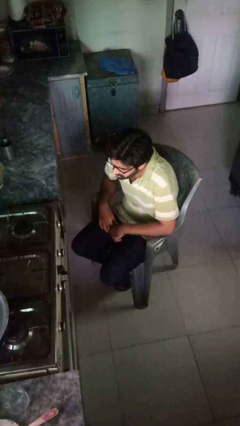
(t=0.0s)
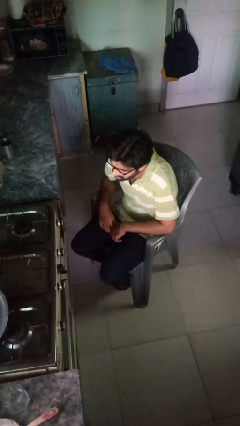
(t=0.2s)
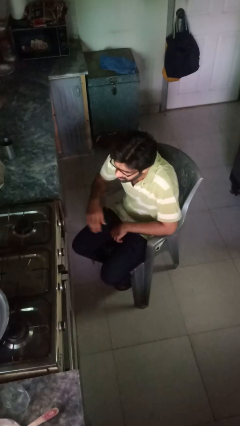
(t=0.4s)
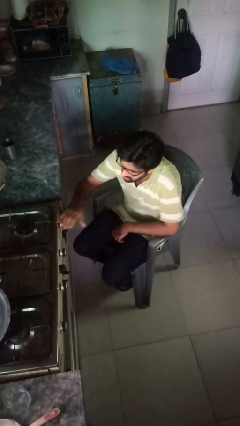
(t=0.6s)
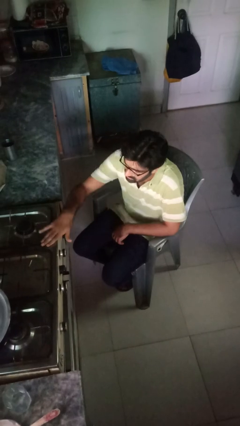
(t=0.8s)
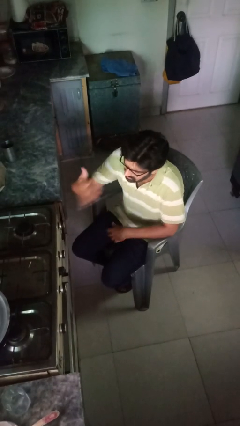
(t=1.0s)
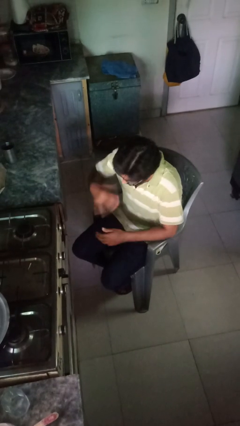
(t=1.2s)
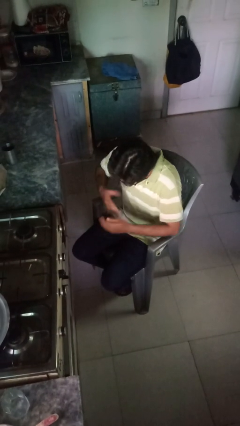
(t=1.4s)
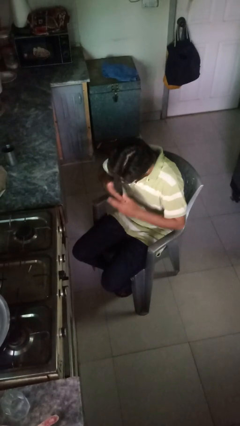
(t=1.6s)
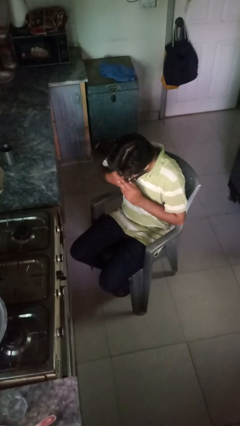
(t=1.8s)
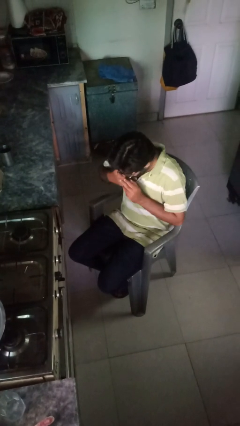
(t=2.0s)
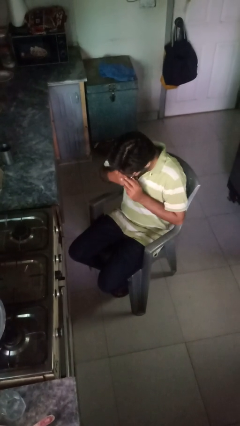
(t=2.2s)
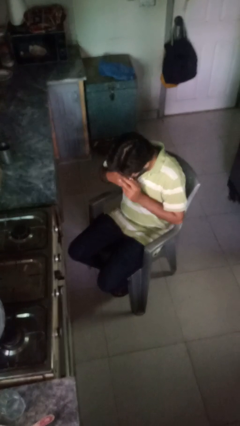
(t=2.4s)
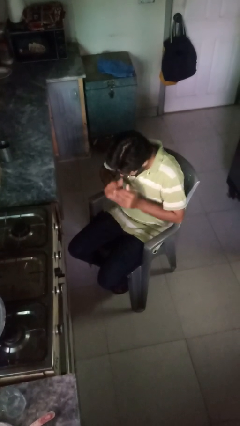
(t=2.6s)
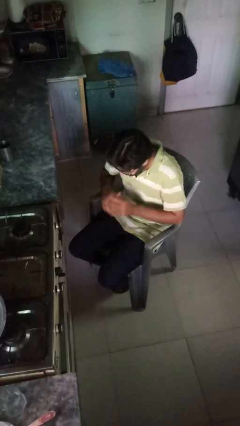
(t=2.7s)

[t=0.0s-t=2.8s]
person burns hand

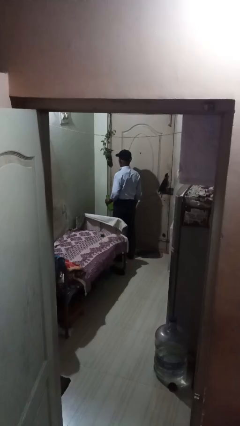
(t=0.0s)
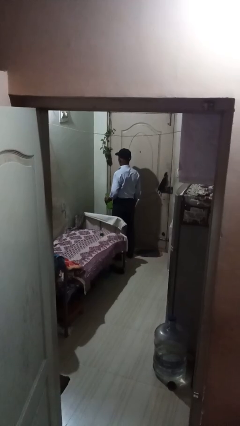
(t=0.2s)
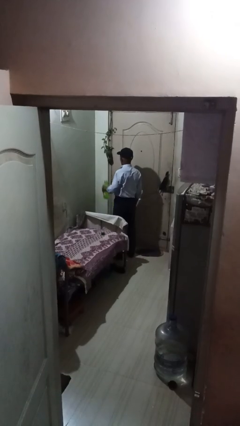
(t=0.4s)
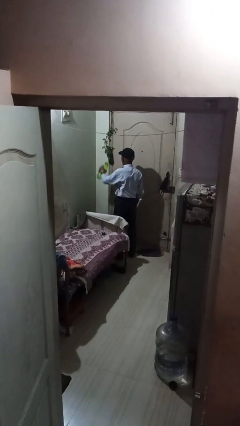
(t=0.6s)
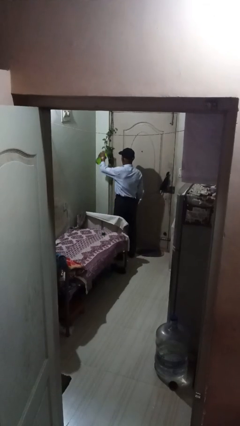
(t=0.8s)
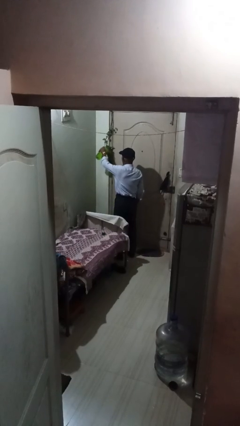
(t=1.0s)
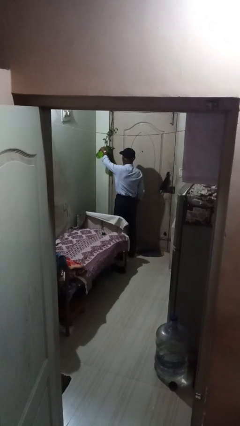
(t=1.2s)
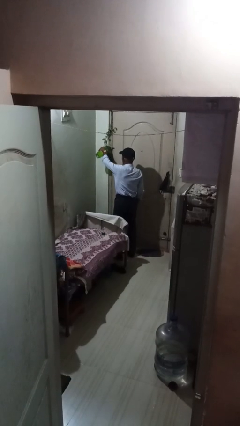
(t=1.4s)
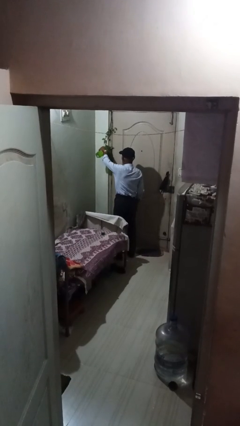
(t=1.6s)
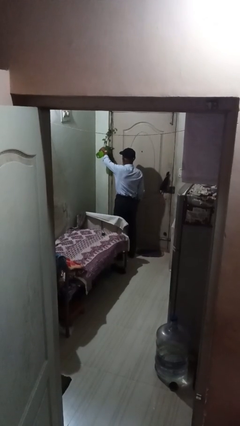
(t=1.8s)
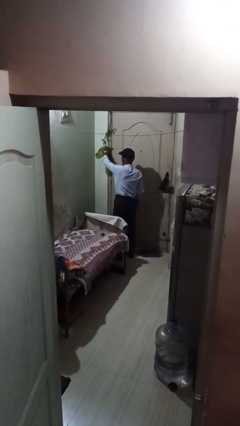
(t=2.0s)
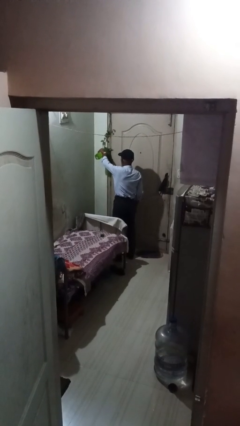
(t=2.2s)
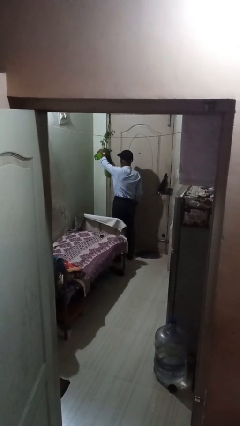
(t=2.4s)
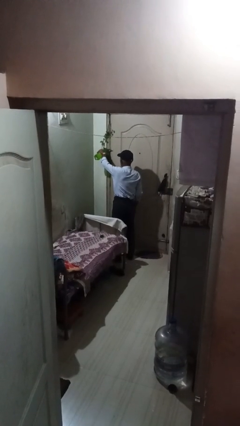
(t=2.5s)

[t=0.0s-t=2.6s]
person waters houseplant

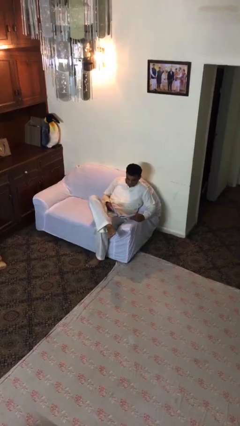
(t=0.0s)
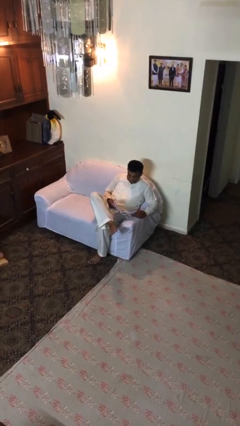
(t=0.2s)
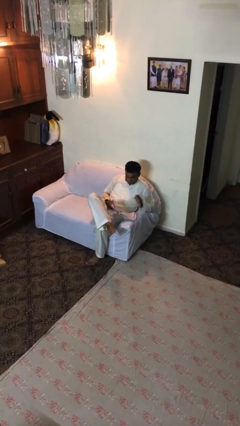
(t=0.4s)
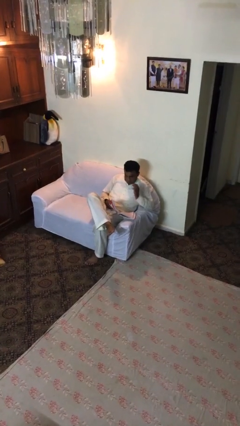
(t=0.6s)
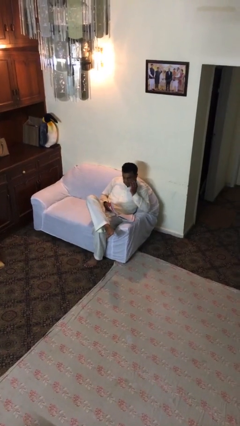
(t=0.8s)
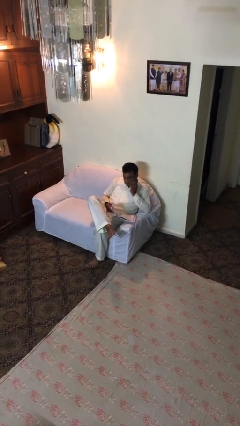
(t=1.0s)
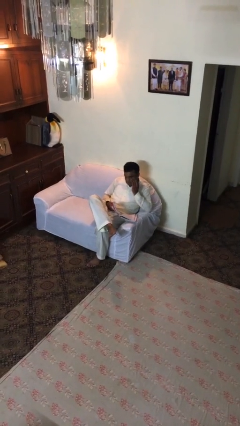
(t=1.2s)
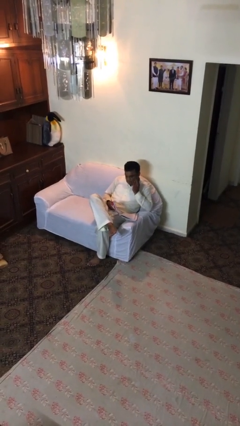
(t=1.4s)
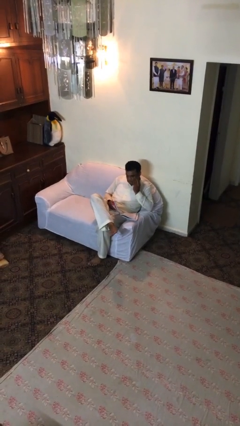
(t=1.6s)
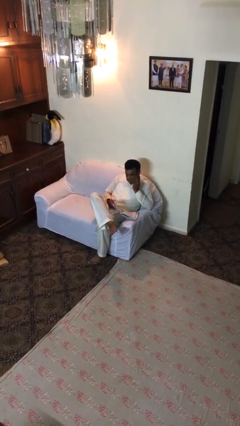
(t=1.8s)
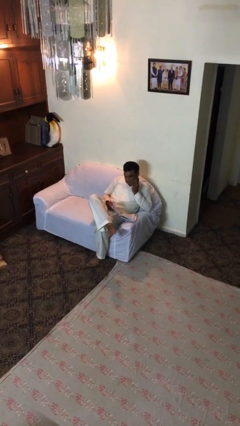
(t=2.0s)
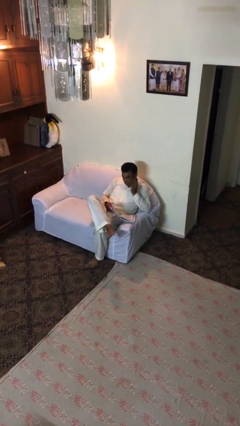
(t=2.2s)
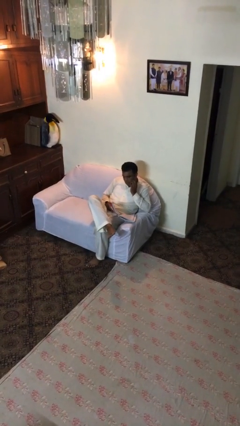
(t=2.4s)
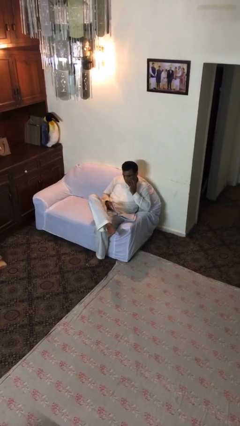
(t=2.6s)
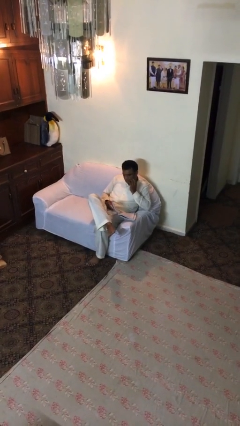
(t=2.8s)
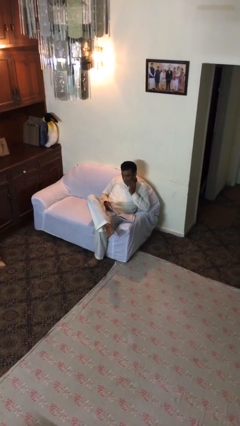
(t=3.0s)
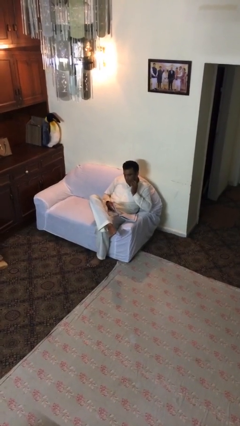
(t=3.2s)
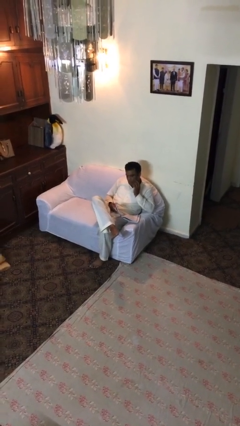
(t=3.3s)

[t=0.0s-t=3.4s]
person reads document

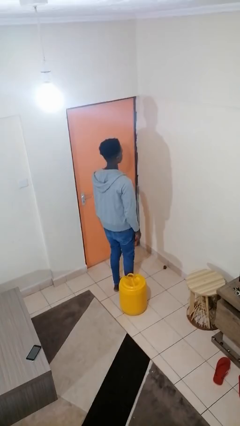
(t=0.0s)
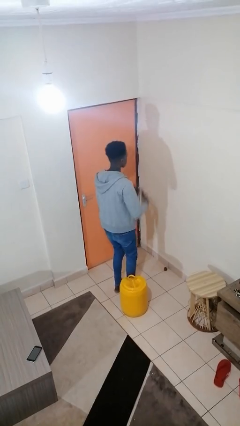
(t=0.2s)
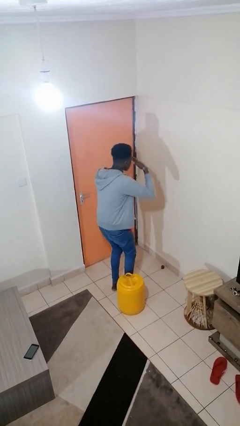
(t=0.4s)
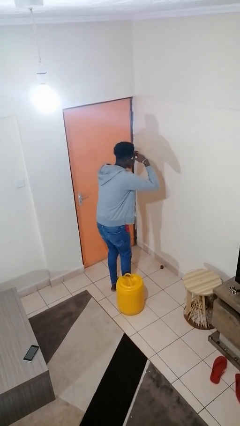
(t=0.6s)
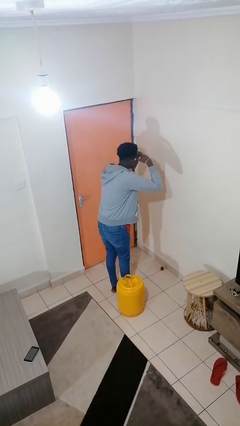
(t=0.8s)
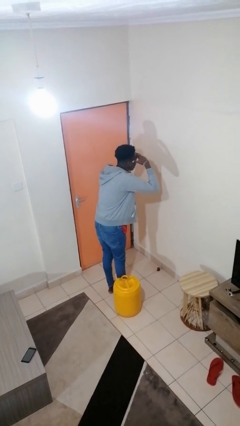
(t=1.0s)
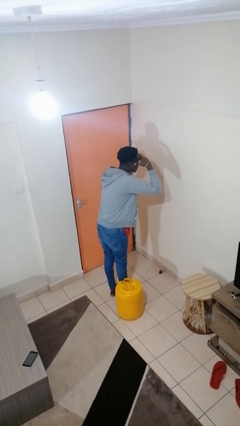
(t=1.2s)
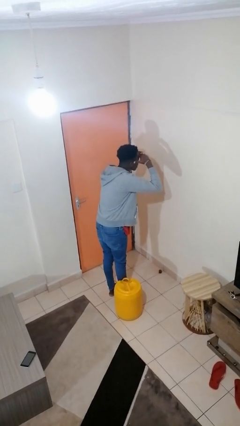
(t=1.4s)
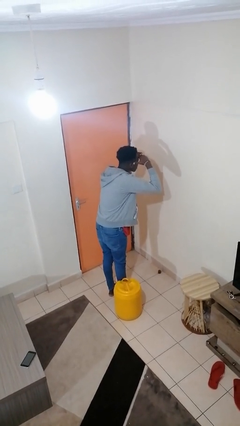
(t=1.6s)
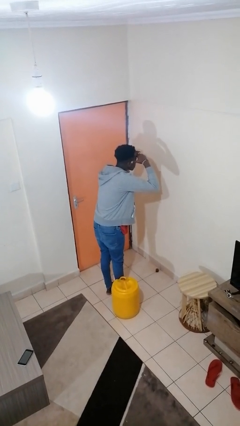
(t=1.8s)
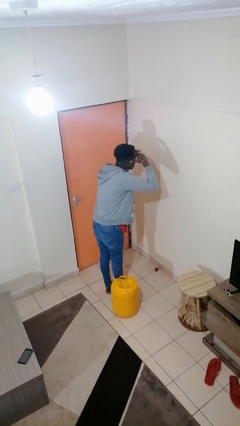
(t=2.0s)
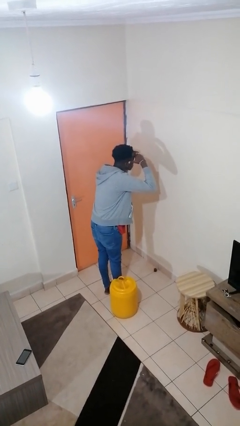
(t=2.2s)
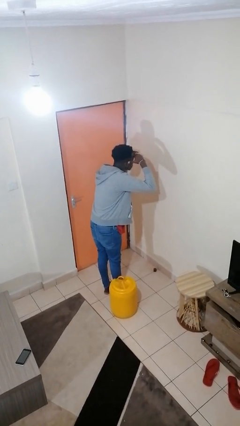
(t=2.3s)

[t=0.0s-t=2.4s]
person shades eyes

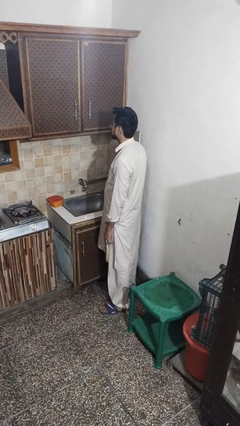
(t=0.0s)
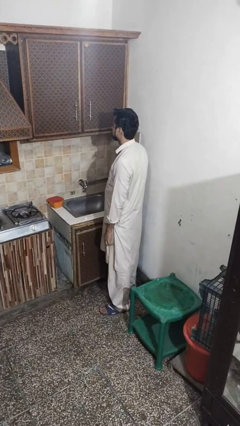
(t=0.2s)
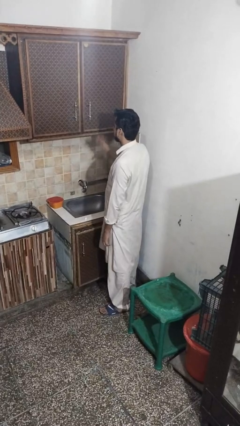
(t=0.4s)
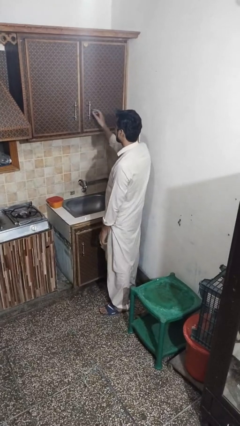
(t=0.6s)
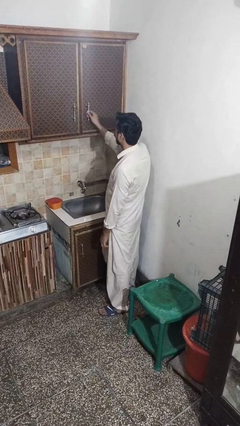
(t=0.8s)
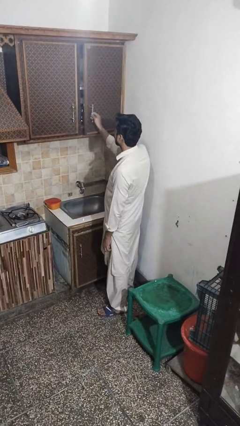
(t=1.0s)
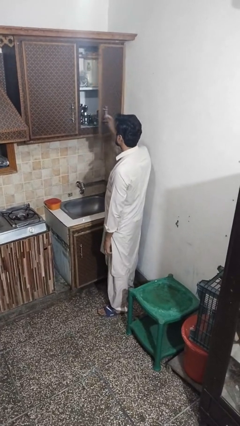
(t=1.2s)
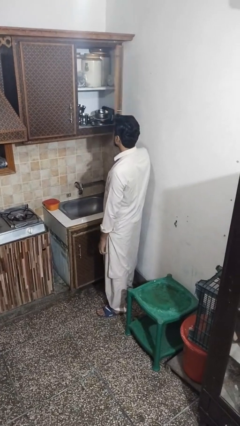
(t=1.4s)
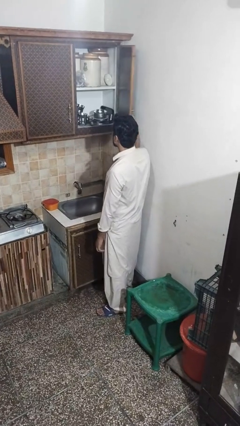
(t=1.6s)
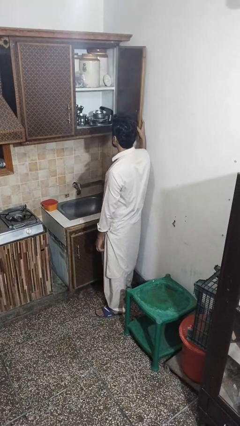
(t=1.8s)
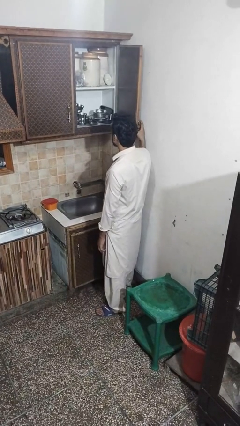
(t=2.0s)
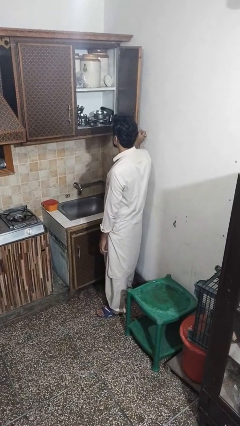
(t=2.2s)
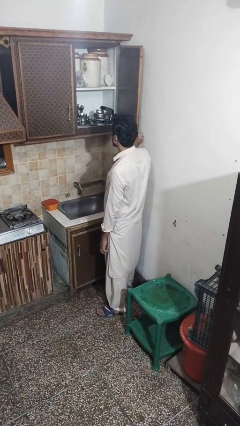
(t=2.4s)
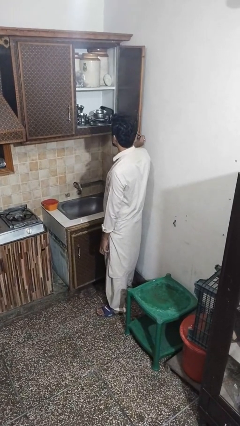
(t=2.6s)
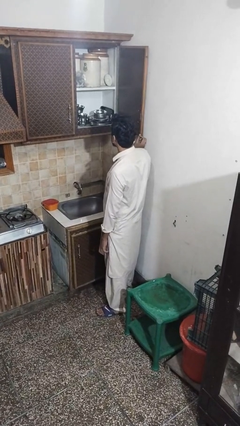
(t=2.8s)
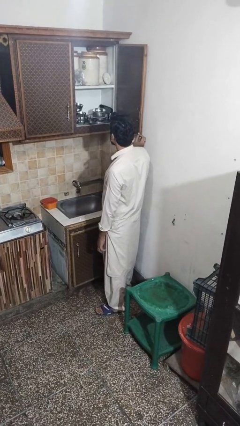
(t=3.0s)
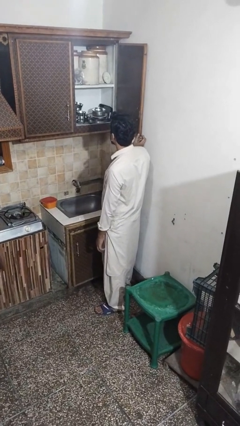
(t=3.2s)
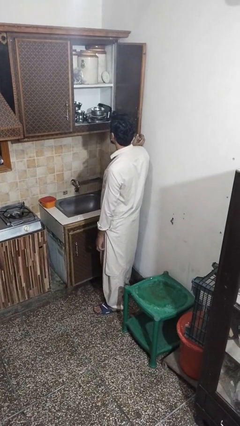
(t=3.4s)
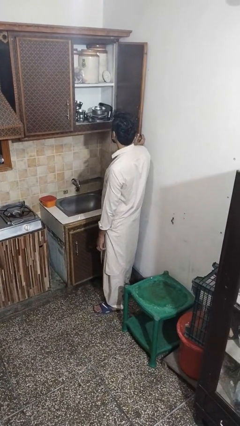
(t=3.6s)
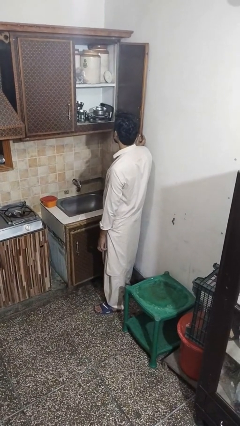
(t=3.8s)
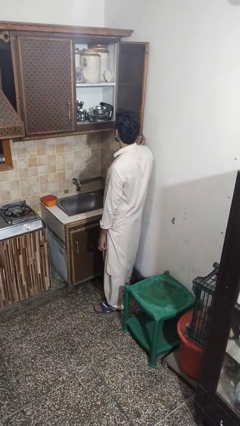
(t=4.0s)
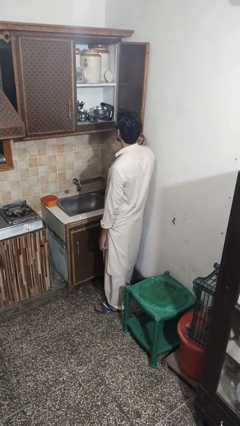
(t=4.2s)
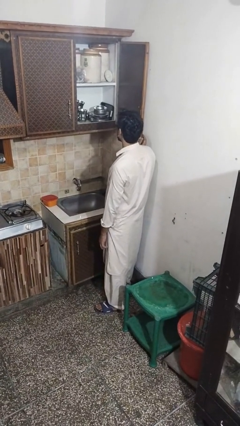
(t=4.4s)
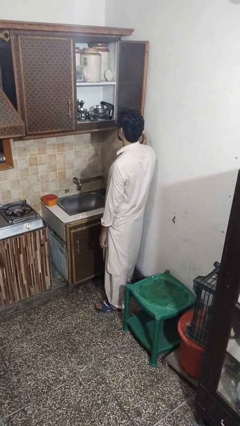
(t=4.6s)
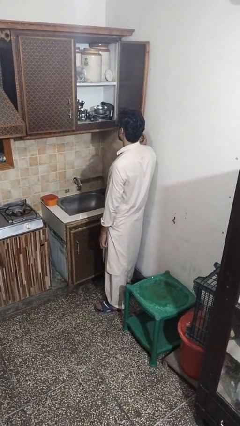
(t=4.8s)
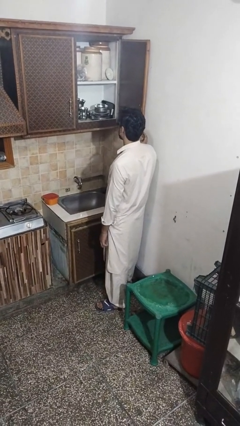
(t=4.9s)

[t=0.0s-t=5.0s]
person opens cabinet

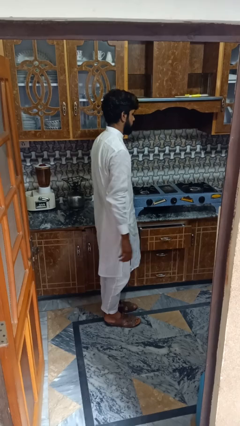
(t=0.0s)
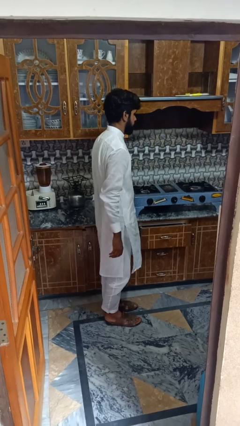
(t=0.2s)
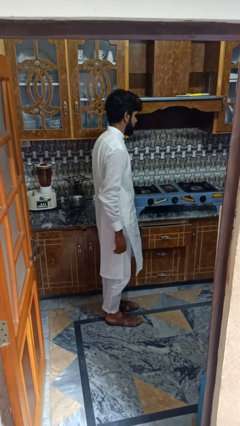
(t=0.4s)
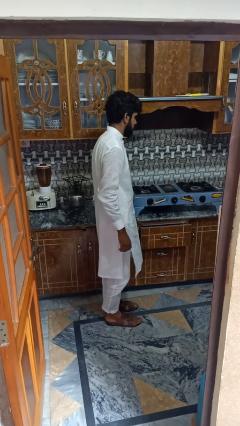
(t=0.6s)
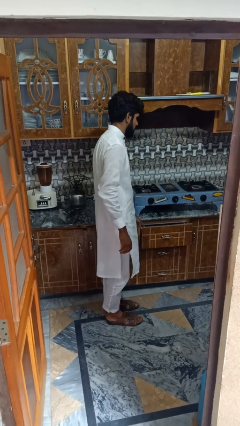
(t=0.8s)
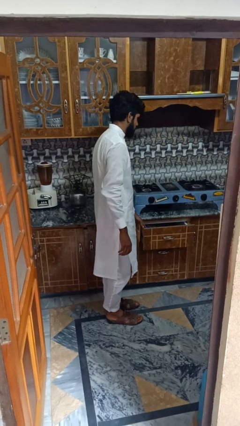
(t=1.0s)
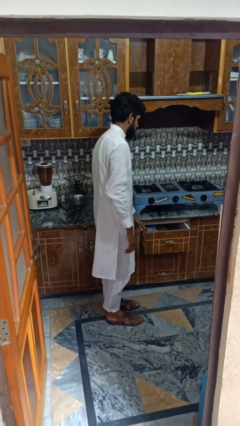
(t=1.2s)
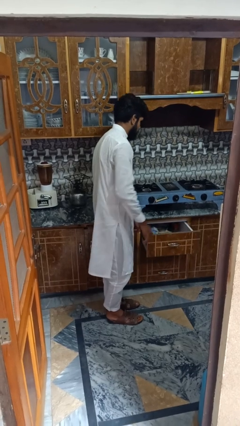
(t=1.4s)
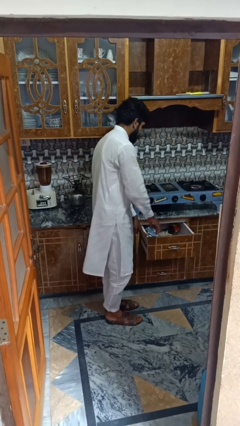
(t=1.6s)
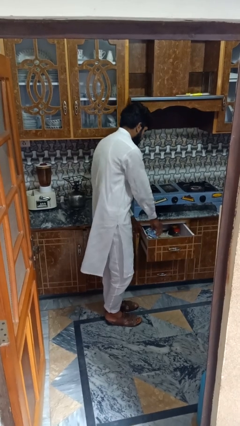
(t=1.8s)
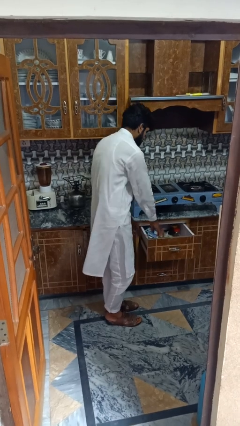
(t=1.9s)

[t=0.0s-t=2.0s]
person searches in kitchen drawer
